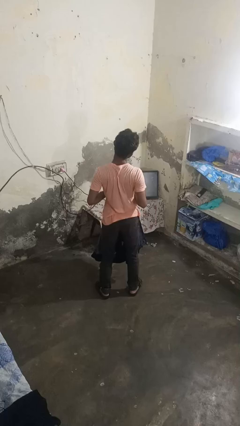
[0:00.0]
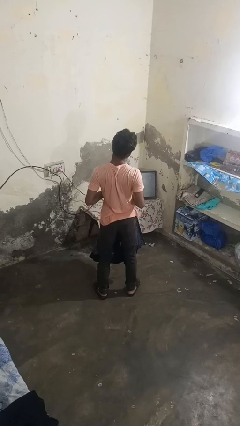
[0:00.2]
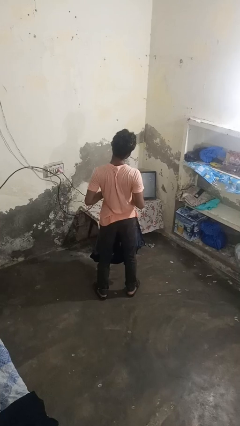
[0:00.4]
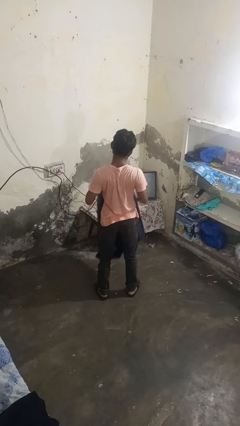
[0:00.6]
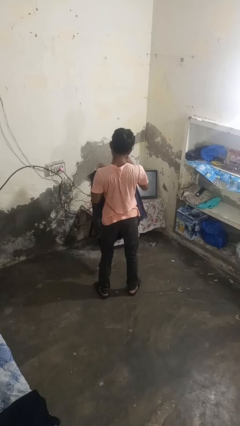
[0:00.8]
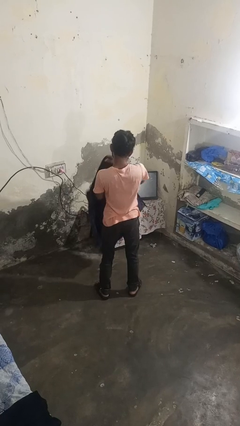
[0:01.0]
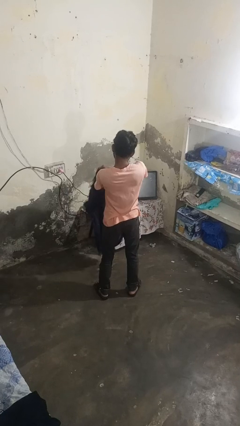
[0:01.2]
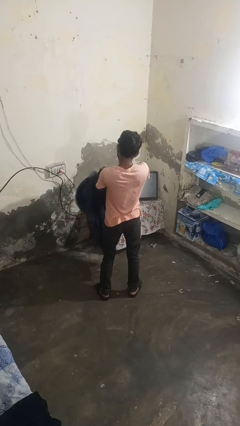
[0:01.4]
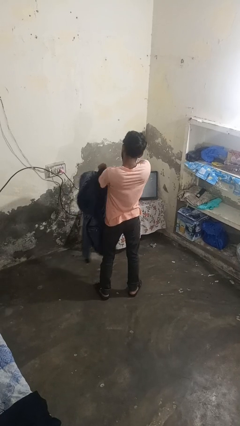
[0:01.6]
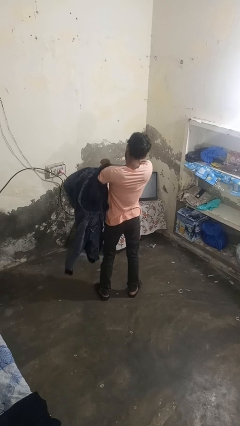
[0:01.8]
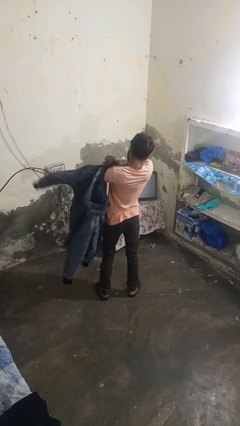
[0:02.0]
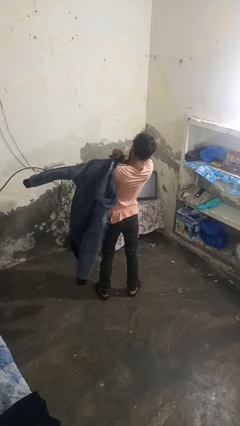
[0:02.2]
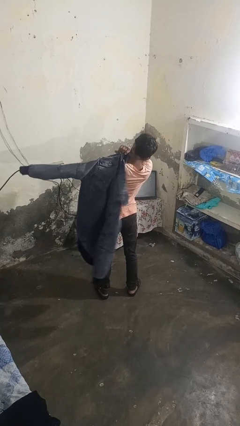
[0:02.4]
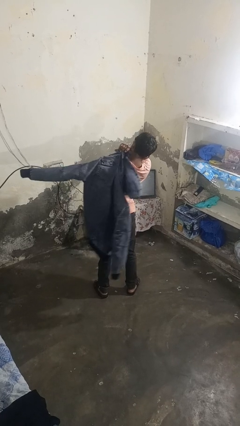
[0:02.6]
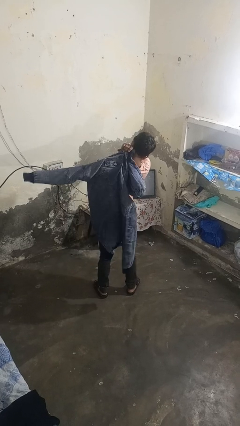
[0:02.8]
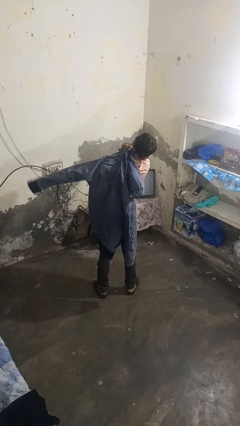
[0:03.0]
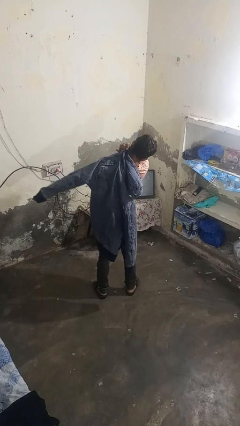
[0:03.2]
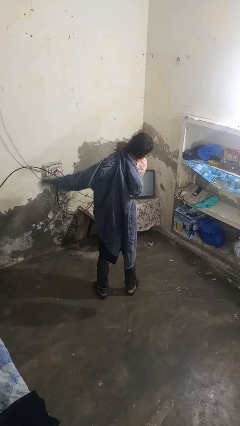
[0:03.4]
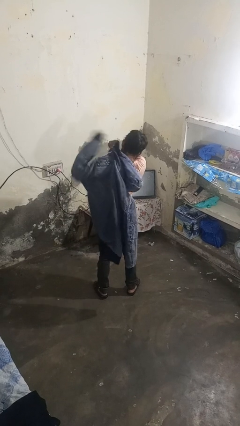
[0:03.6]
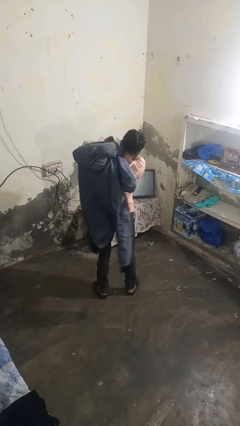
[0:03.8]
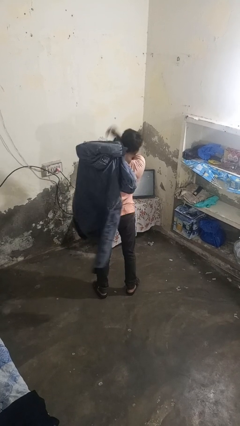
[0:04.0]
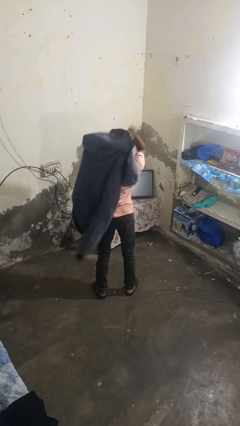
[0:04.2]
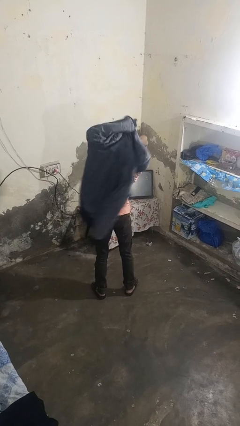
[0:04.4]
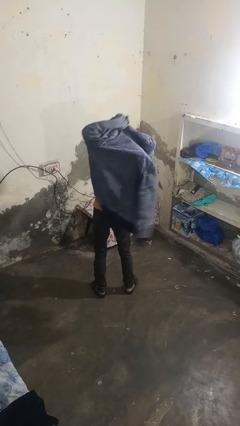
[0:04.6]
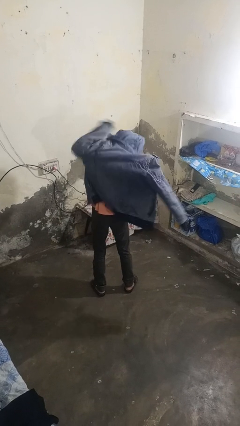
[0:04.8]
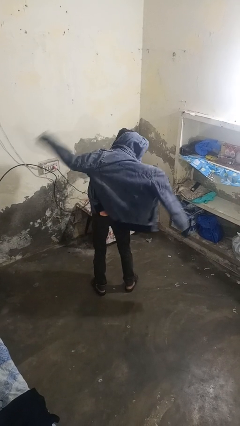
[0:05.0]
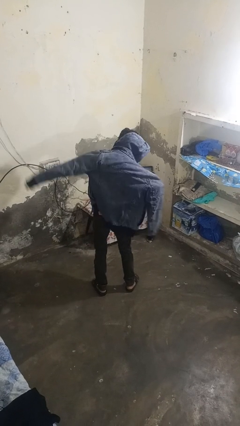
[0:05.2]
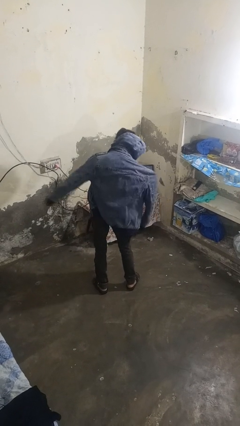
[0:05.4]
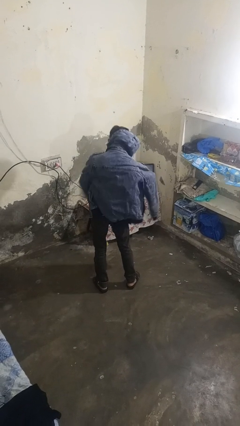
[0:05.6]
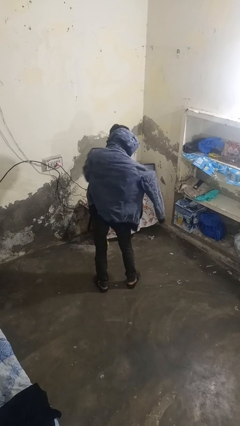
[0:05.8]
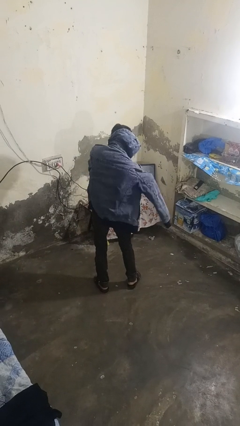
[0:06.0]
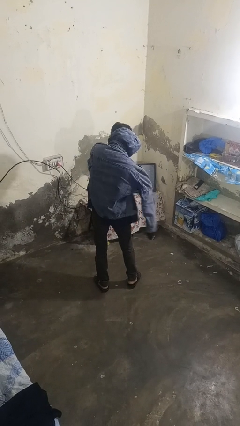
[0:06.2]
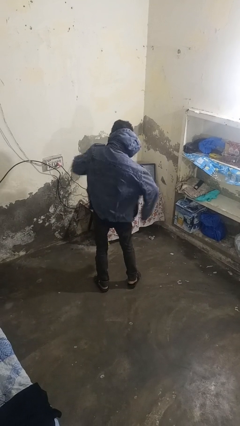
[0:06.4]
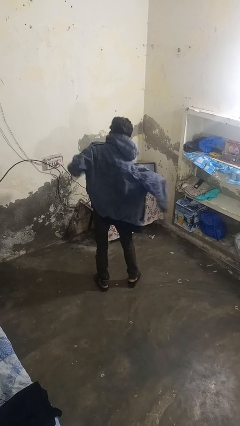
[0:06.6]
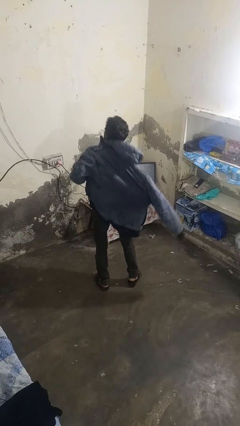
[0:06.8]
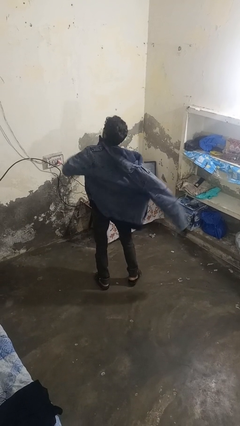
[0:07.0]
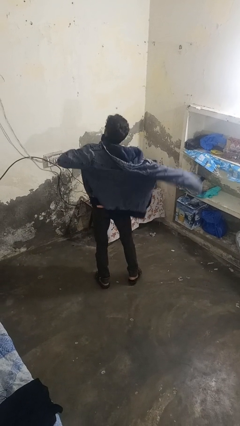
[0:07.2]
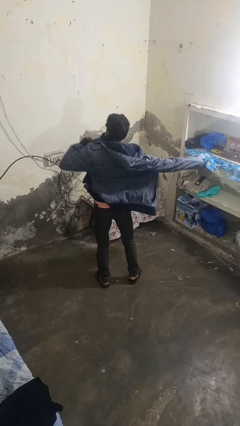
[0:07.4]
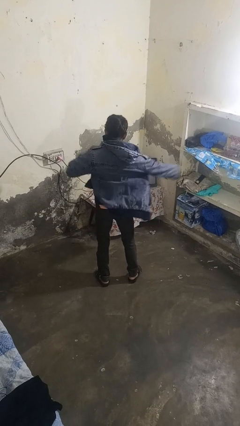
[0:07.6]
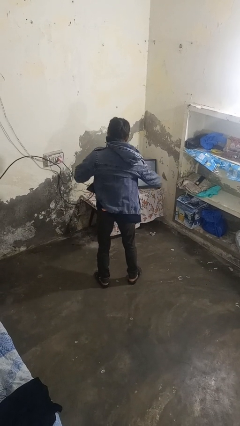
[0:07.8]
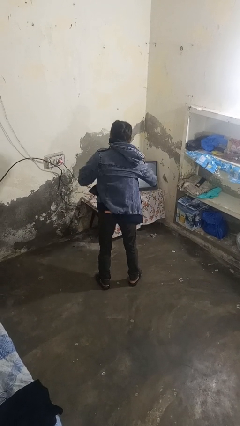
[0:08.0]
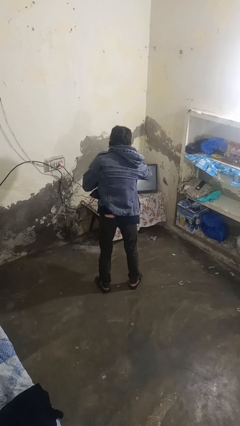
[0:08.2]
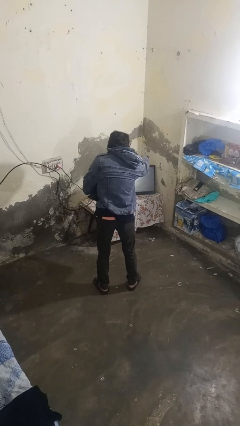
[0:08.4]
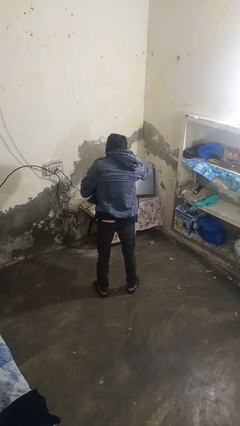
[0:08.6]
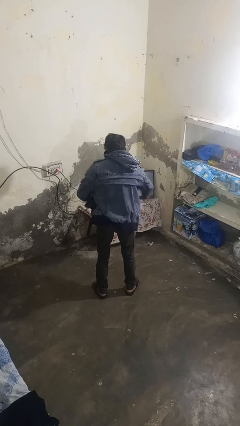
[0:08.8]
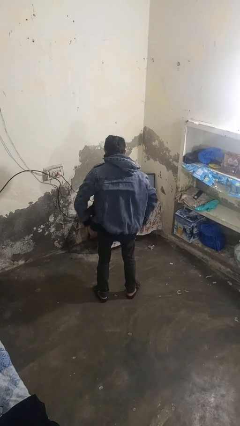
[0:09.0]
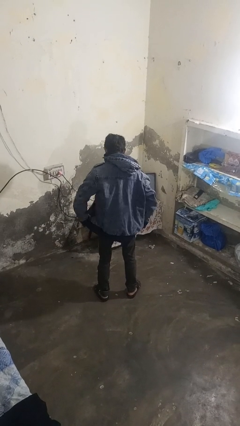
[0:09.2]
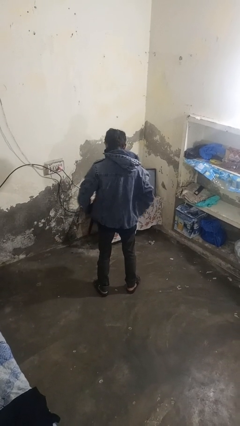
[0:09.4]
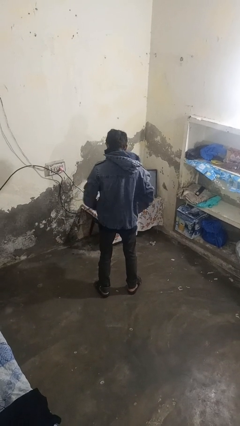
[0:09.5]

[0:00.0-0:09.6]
person puts on jacket

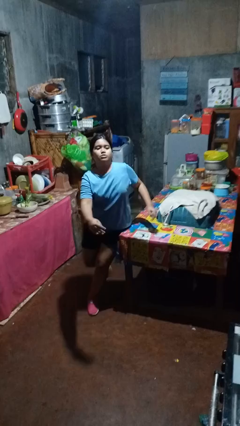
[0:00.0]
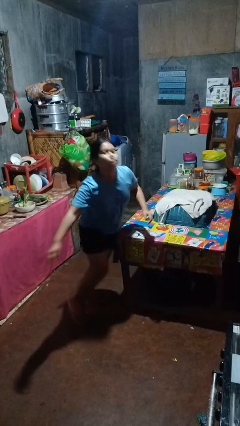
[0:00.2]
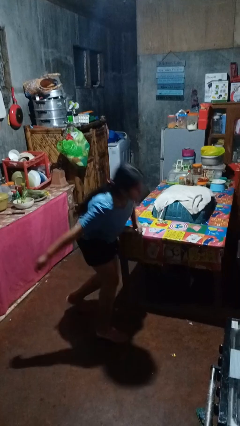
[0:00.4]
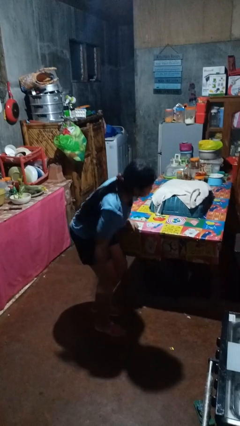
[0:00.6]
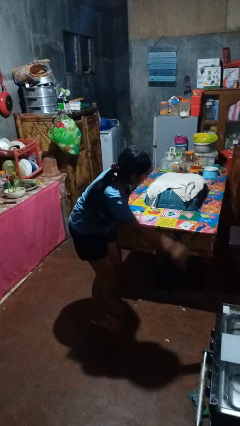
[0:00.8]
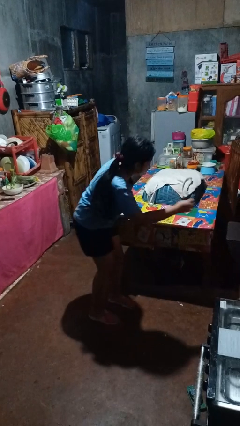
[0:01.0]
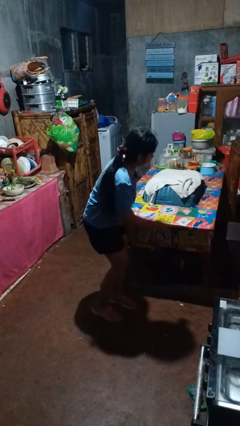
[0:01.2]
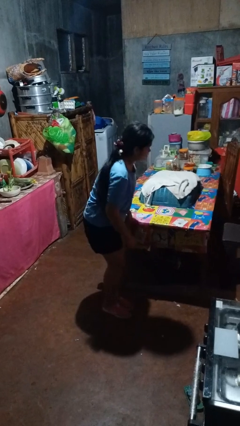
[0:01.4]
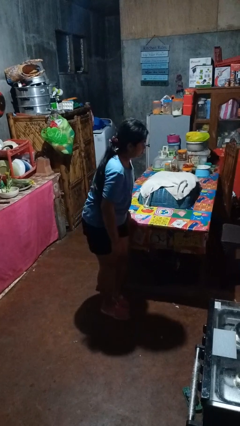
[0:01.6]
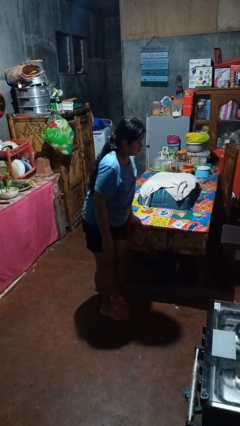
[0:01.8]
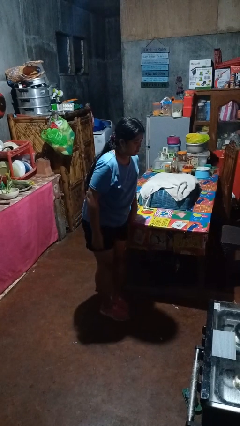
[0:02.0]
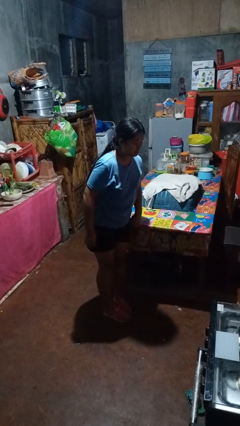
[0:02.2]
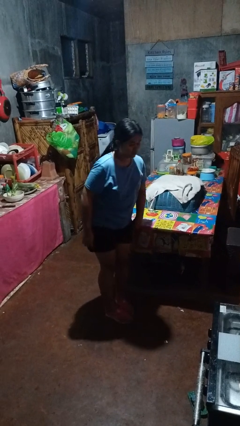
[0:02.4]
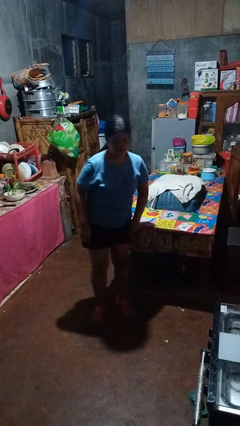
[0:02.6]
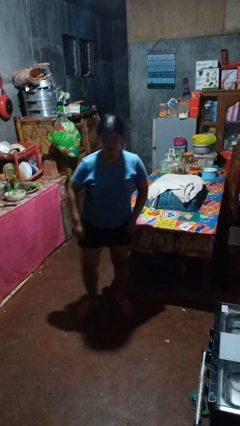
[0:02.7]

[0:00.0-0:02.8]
person bumps into table

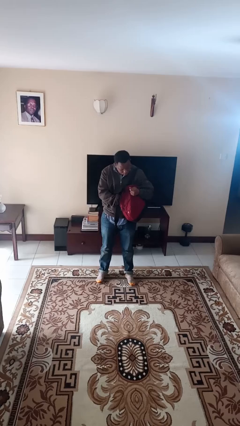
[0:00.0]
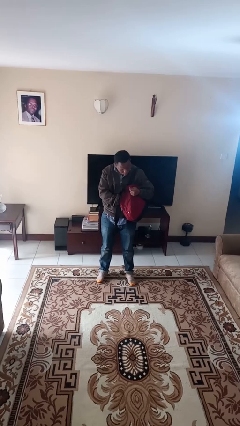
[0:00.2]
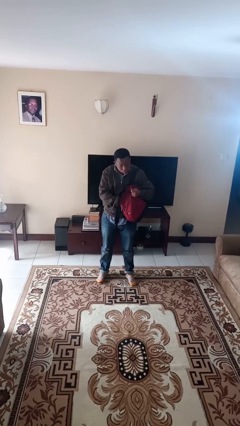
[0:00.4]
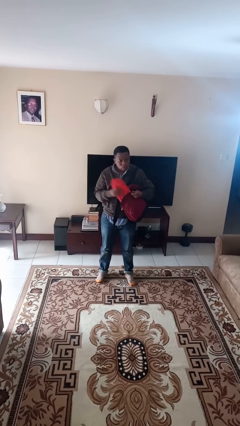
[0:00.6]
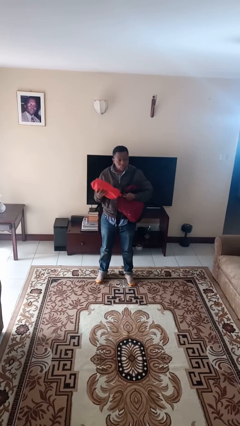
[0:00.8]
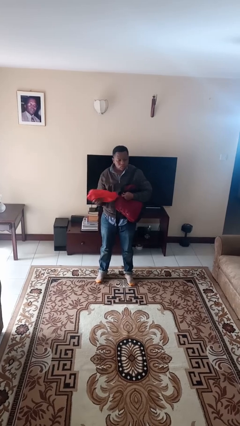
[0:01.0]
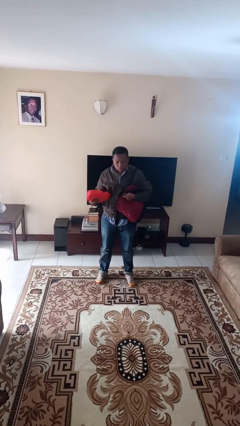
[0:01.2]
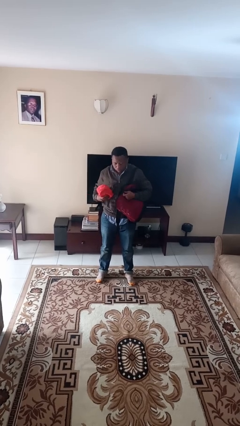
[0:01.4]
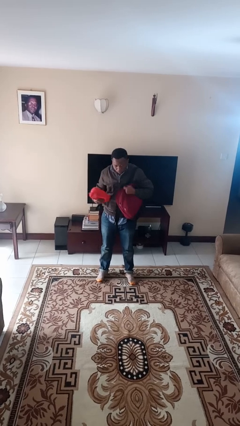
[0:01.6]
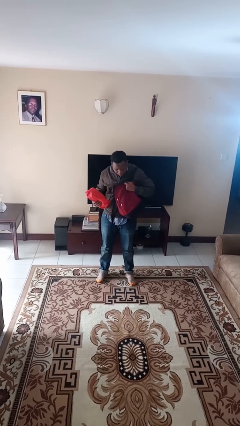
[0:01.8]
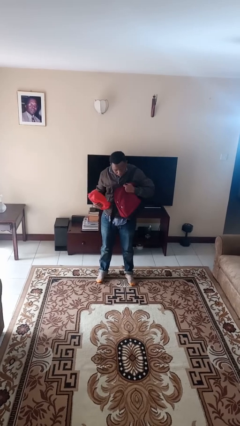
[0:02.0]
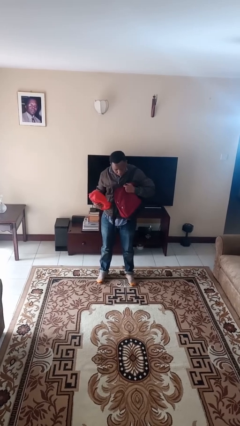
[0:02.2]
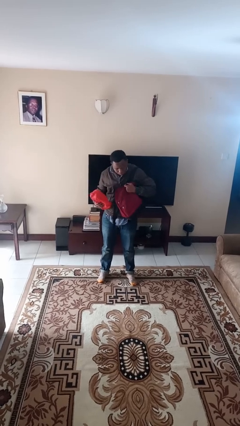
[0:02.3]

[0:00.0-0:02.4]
person takes object from backpack

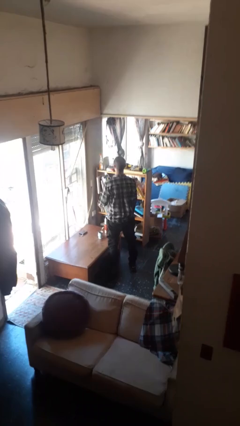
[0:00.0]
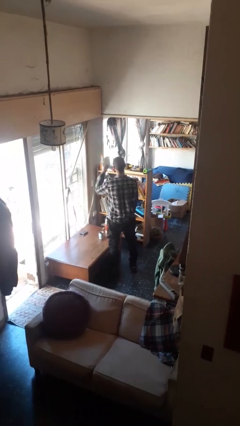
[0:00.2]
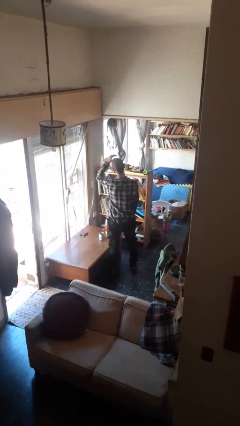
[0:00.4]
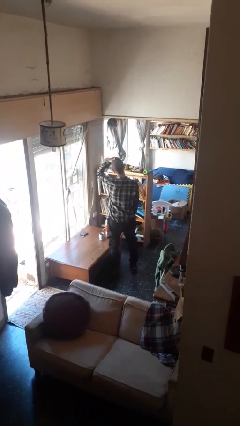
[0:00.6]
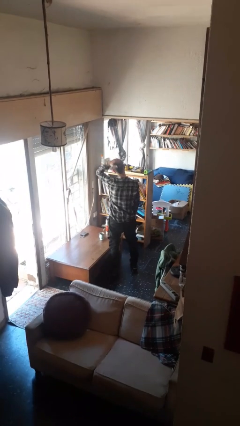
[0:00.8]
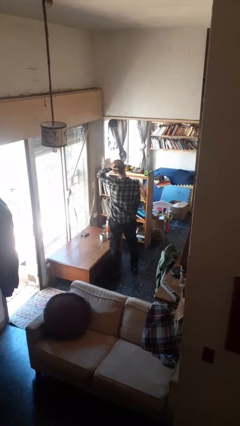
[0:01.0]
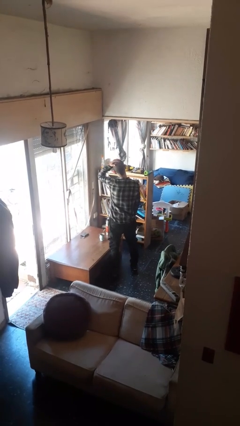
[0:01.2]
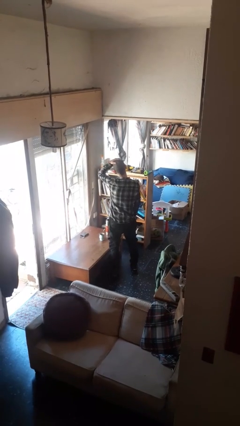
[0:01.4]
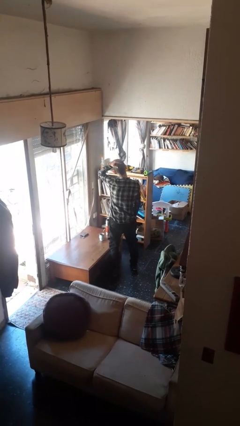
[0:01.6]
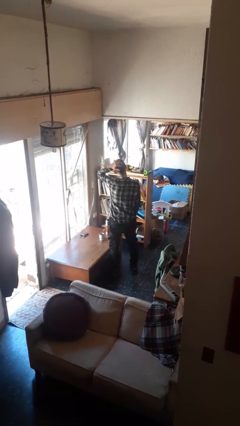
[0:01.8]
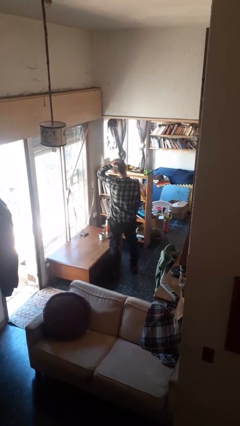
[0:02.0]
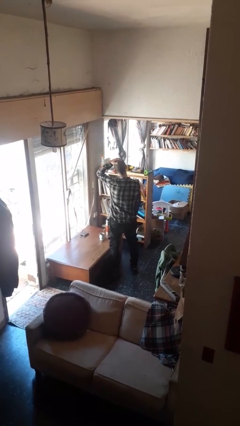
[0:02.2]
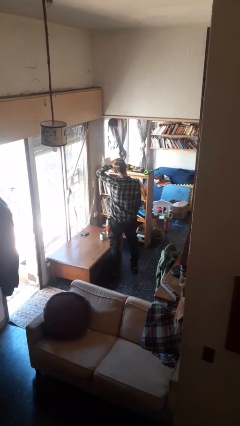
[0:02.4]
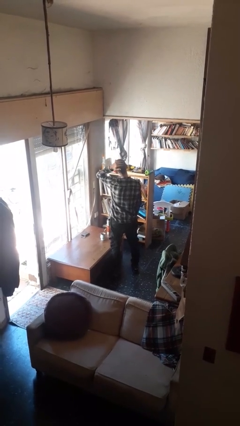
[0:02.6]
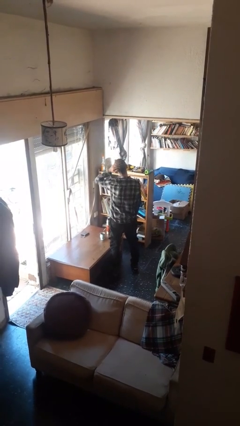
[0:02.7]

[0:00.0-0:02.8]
person pats head

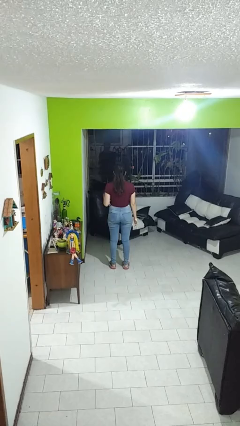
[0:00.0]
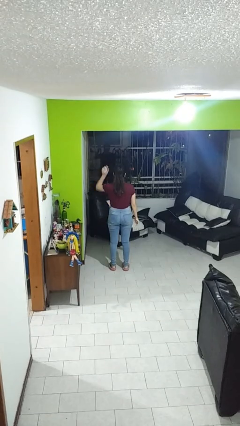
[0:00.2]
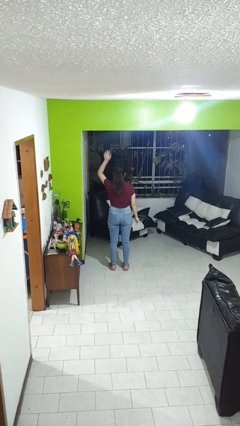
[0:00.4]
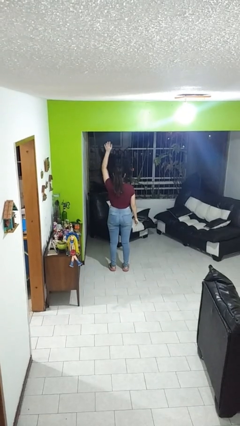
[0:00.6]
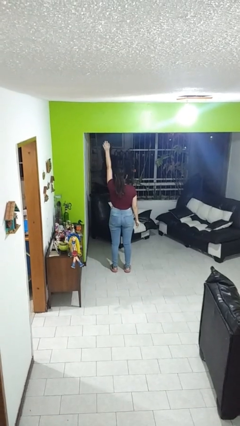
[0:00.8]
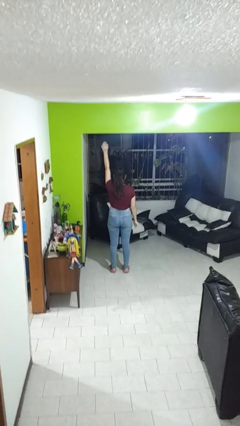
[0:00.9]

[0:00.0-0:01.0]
person gestures raise hand
